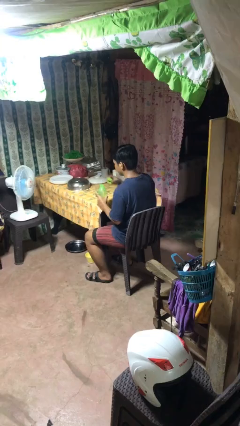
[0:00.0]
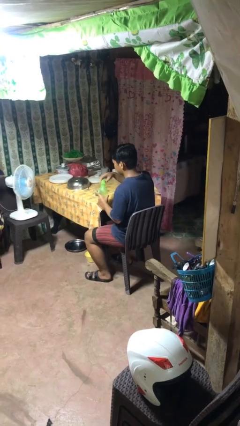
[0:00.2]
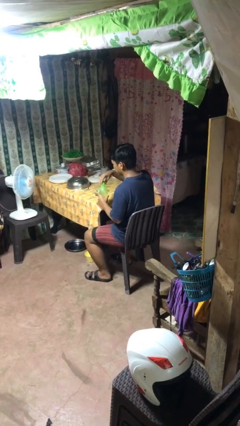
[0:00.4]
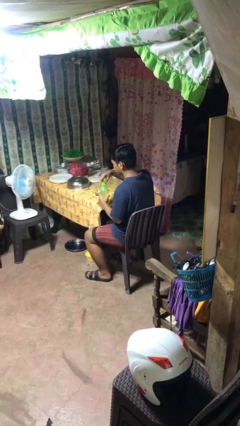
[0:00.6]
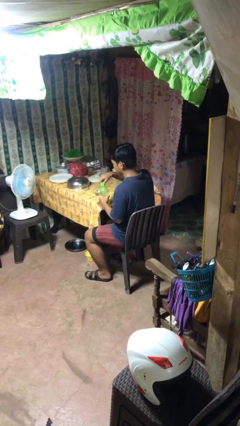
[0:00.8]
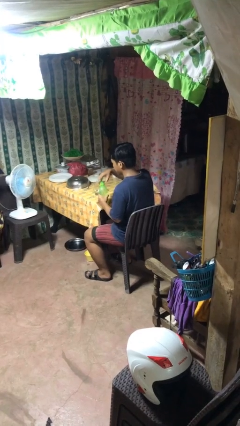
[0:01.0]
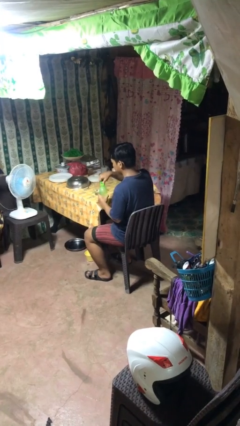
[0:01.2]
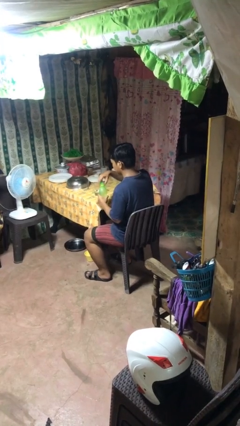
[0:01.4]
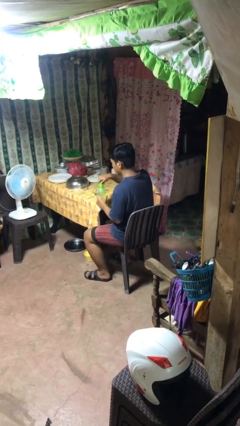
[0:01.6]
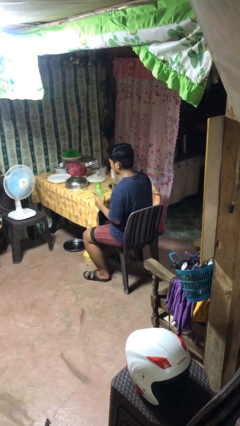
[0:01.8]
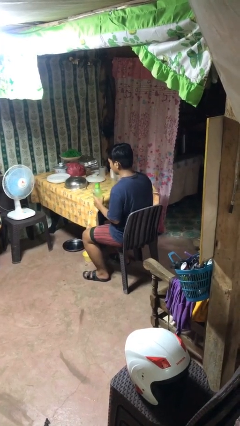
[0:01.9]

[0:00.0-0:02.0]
person screws lid to bottle

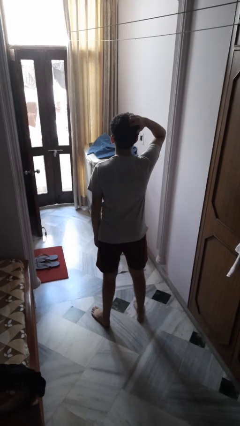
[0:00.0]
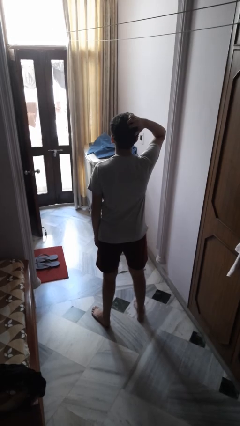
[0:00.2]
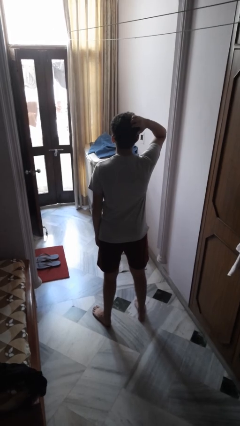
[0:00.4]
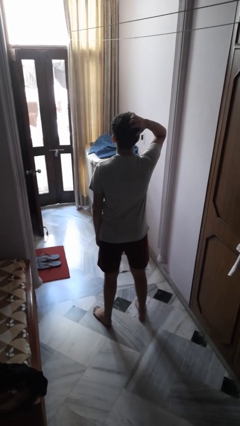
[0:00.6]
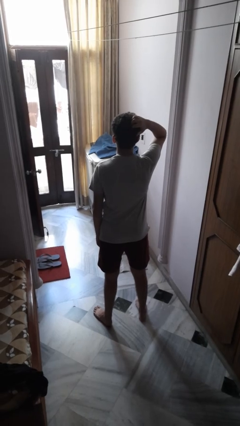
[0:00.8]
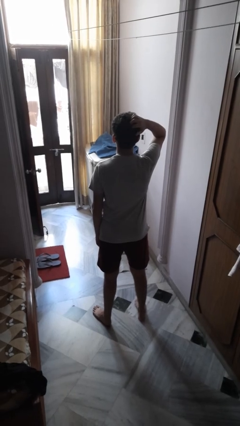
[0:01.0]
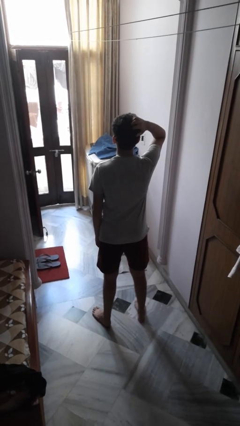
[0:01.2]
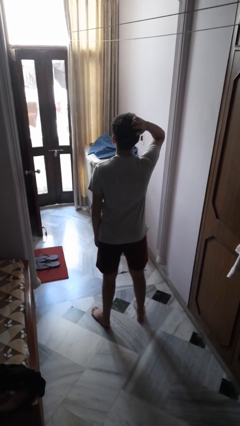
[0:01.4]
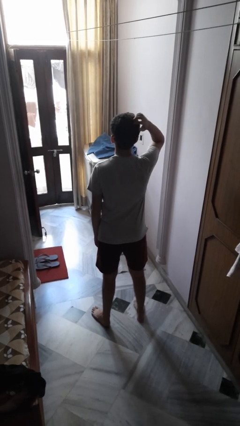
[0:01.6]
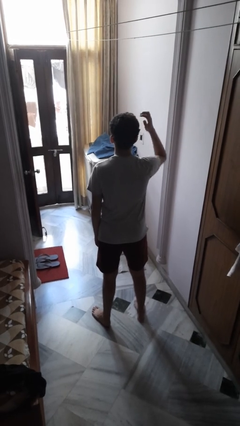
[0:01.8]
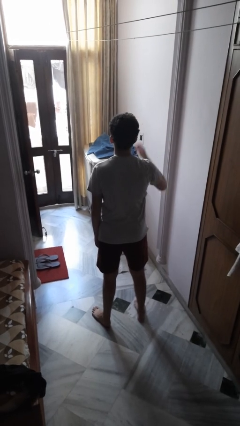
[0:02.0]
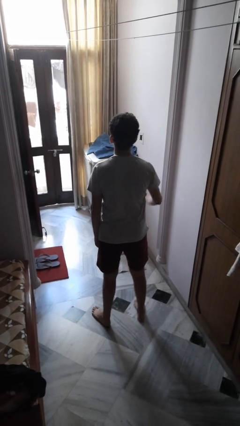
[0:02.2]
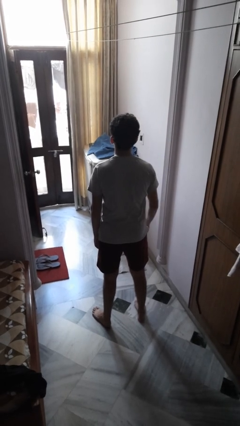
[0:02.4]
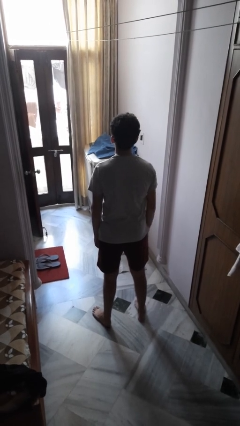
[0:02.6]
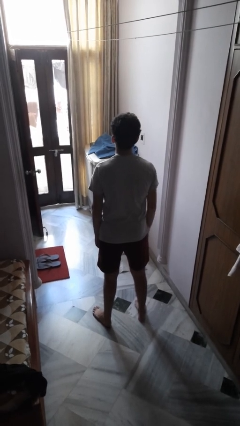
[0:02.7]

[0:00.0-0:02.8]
person scratches face

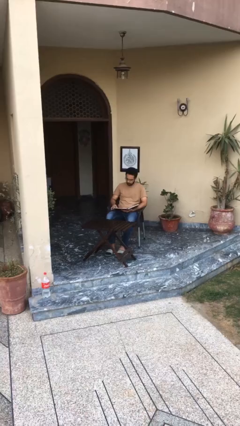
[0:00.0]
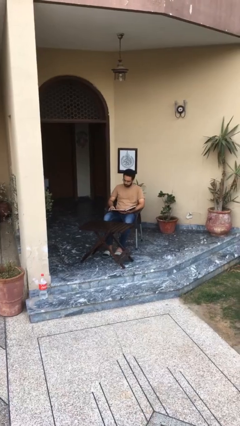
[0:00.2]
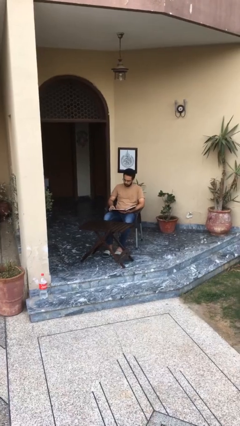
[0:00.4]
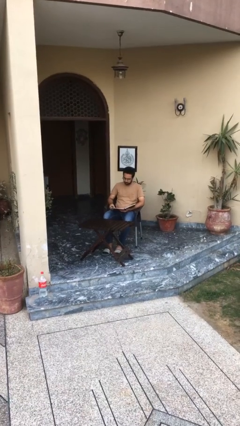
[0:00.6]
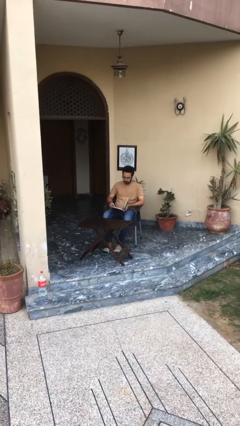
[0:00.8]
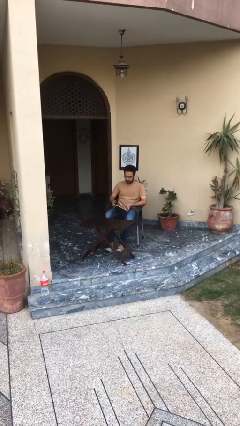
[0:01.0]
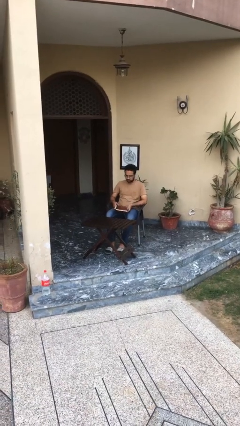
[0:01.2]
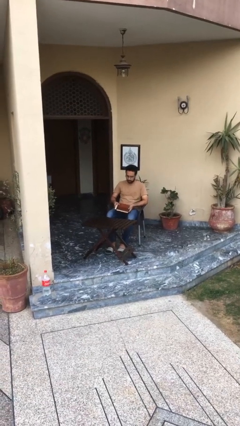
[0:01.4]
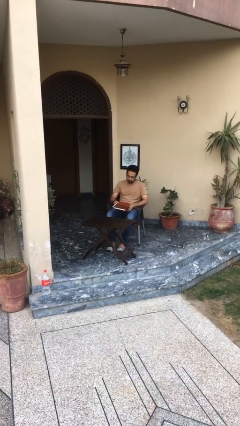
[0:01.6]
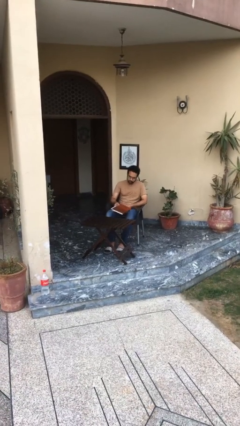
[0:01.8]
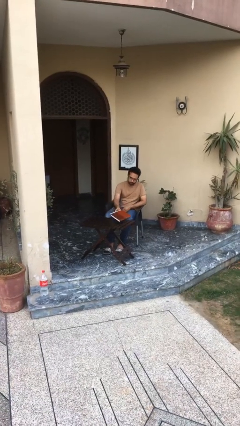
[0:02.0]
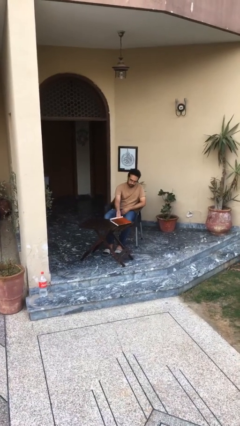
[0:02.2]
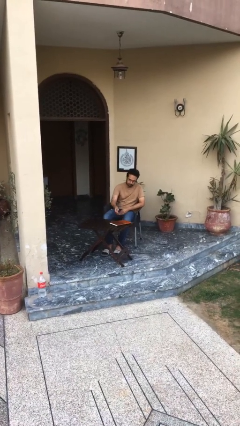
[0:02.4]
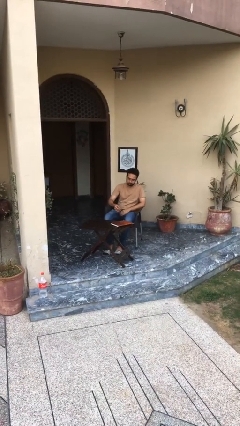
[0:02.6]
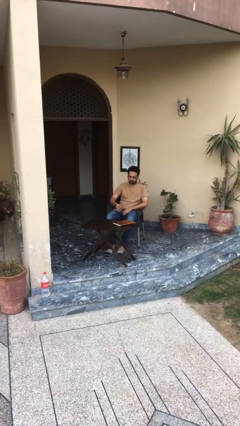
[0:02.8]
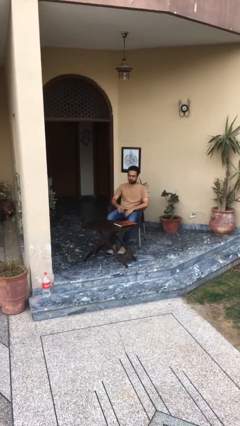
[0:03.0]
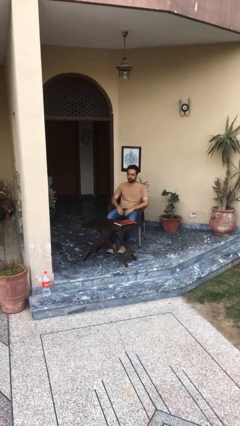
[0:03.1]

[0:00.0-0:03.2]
person puts down object on table

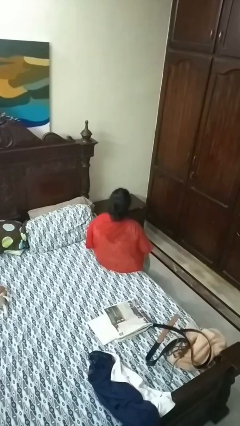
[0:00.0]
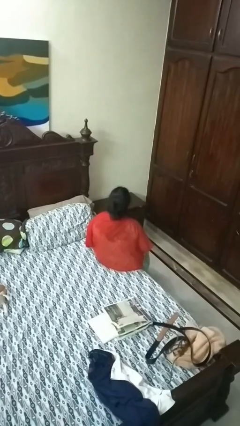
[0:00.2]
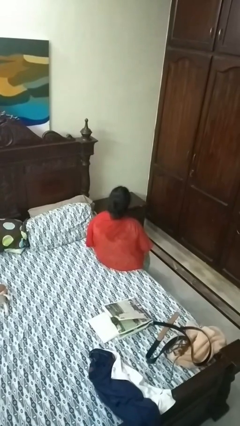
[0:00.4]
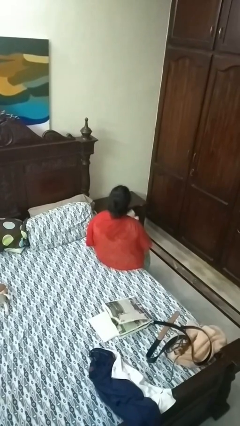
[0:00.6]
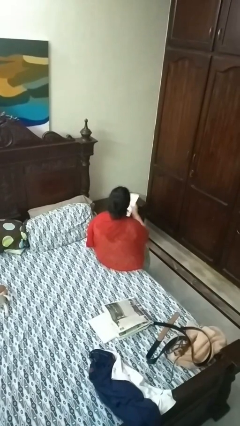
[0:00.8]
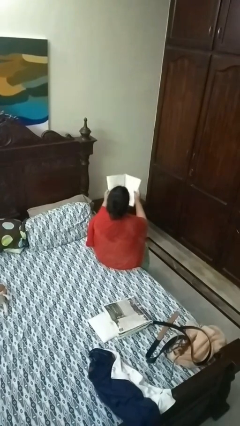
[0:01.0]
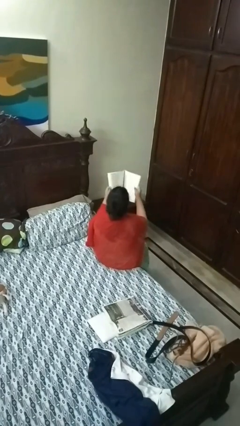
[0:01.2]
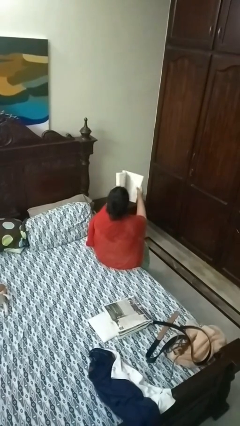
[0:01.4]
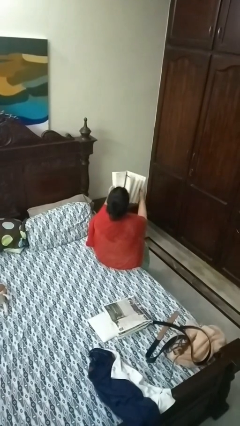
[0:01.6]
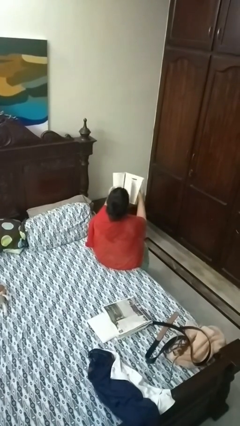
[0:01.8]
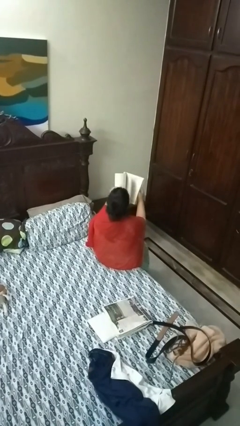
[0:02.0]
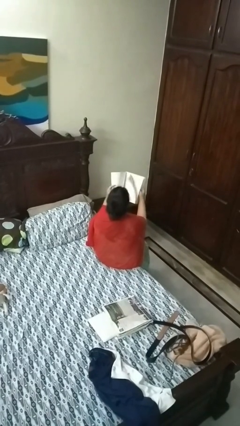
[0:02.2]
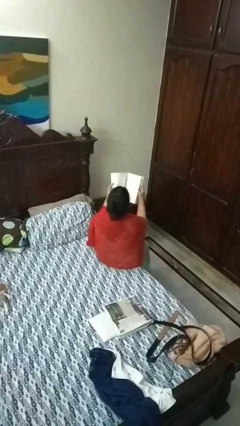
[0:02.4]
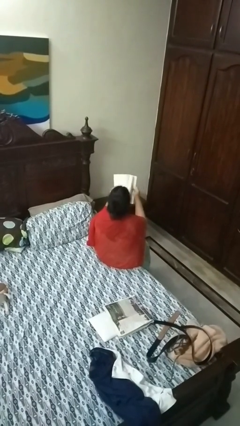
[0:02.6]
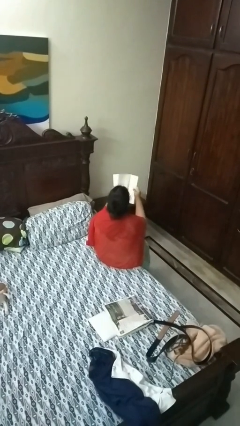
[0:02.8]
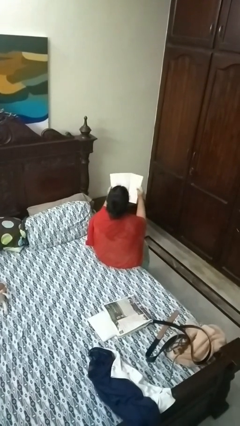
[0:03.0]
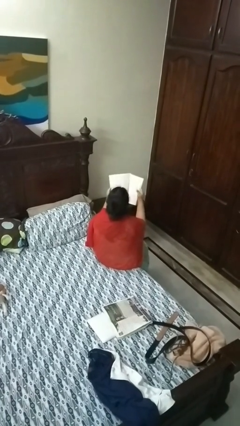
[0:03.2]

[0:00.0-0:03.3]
person reads magazine

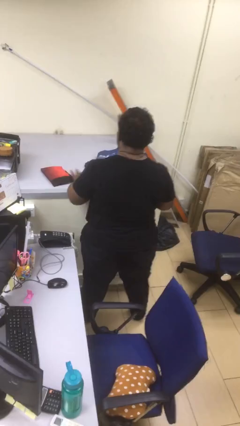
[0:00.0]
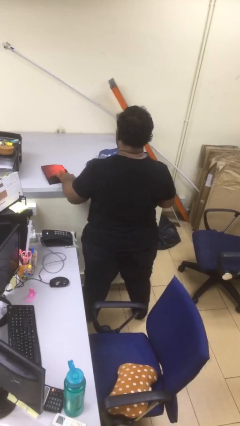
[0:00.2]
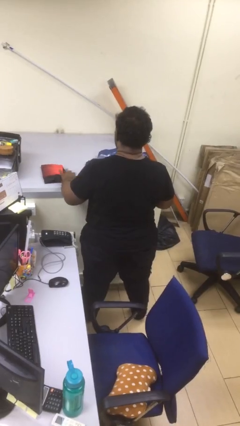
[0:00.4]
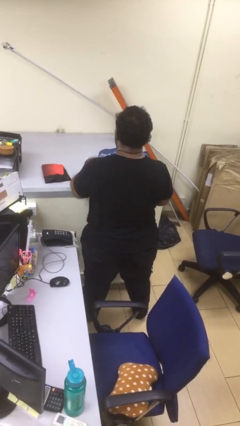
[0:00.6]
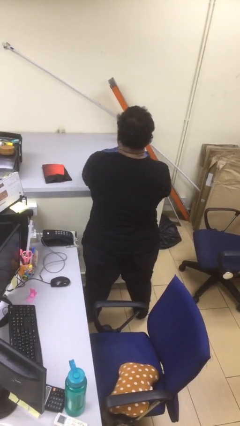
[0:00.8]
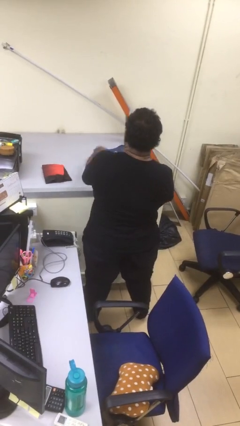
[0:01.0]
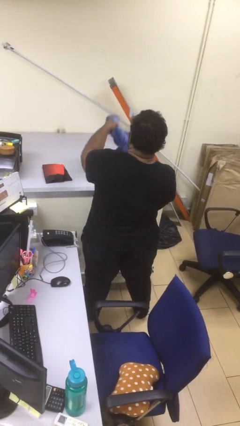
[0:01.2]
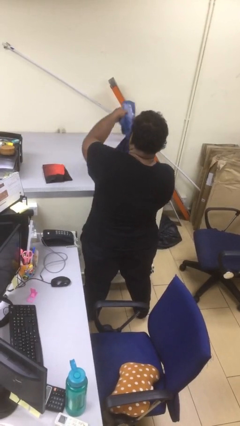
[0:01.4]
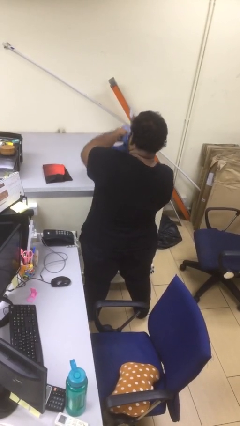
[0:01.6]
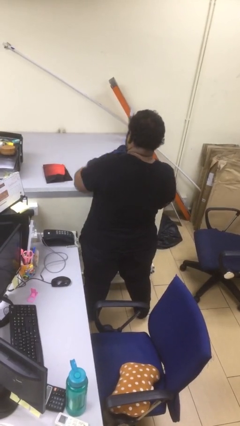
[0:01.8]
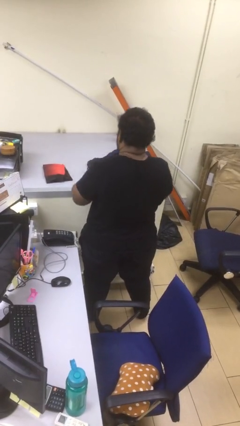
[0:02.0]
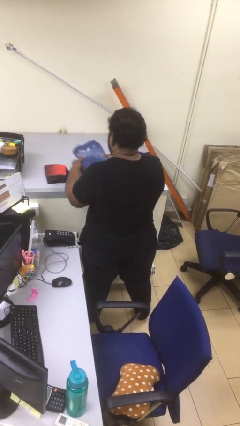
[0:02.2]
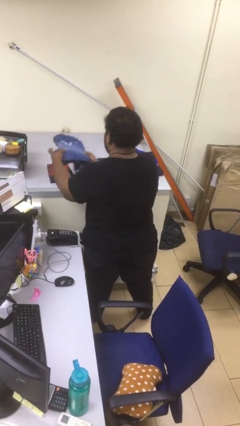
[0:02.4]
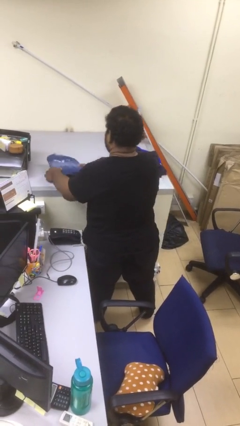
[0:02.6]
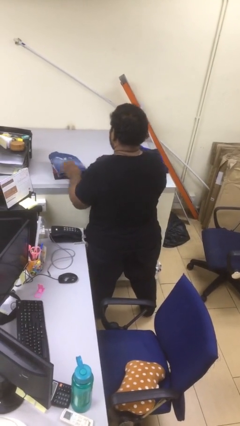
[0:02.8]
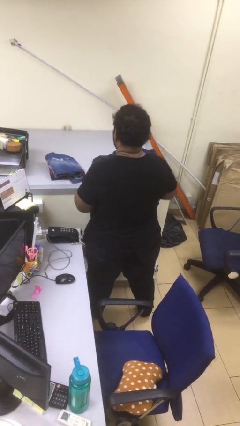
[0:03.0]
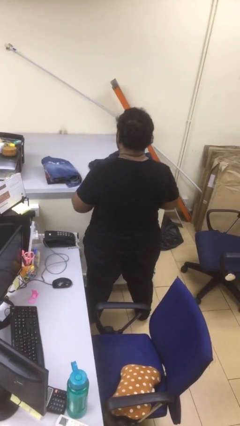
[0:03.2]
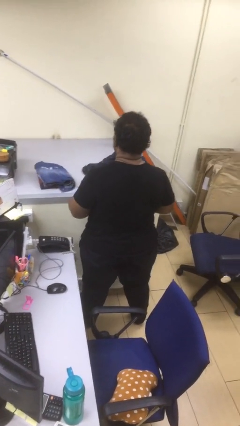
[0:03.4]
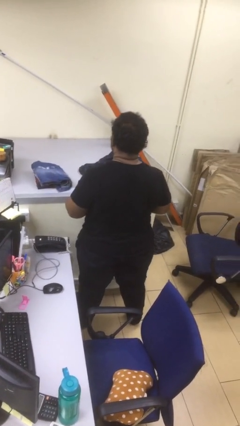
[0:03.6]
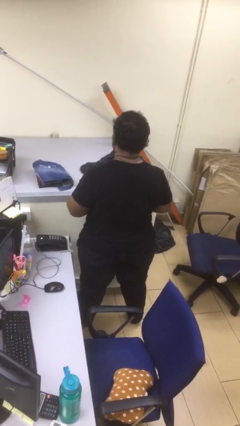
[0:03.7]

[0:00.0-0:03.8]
person folds pants

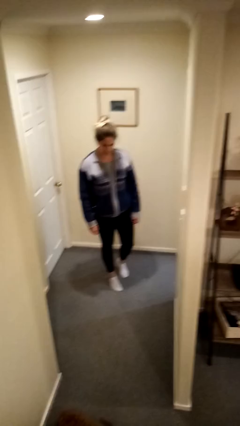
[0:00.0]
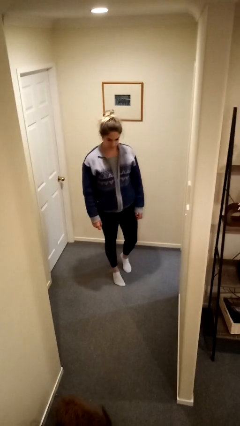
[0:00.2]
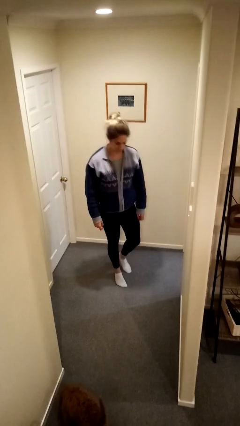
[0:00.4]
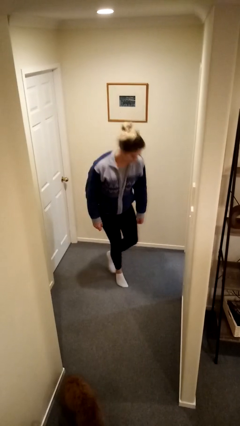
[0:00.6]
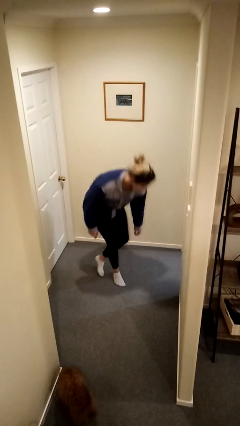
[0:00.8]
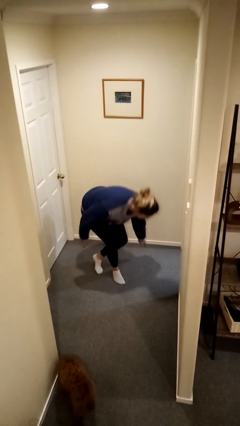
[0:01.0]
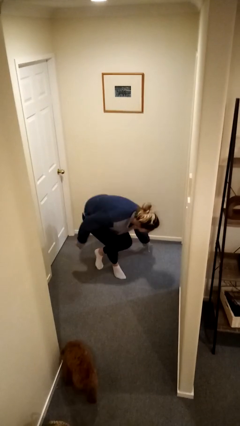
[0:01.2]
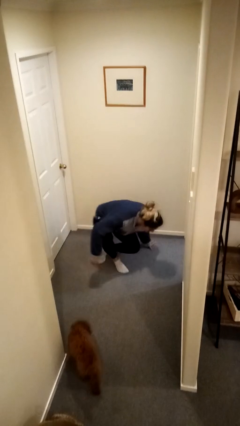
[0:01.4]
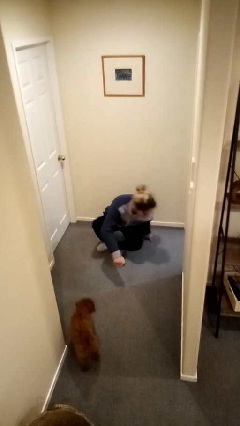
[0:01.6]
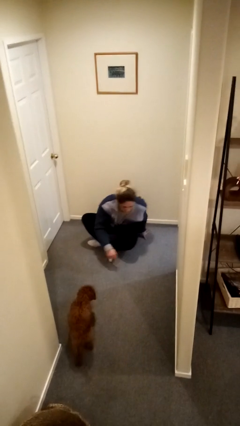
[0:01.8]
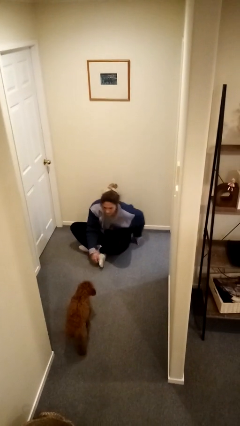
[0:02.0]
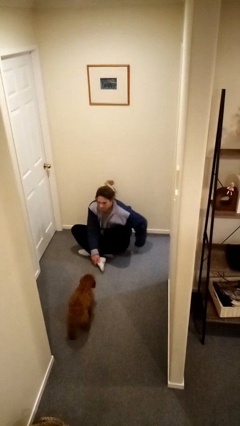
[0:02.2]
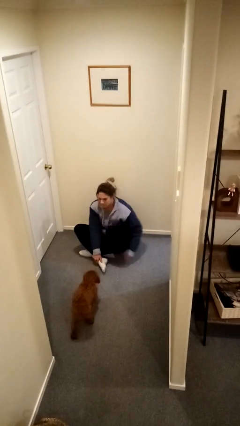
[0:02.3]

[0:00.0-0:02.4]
person sits crisscross
